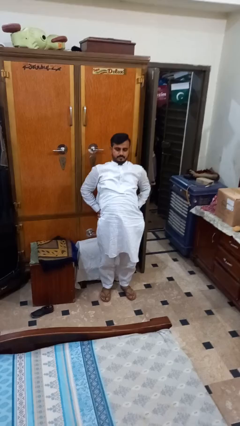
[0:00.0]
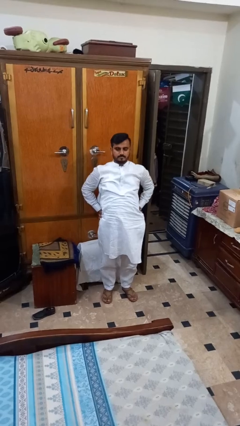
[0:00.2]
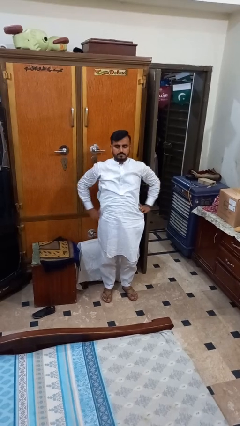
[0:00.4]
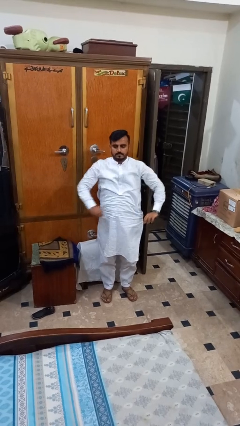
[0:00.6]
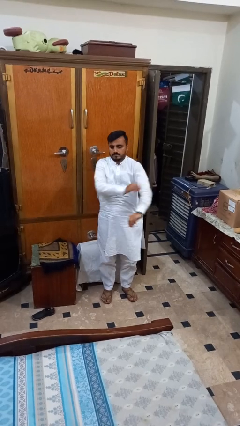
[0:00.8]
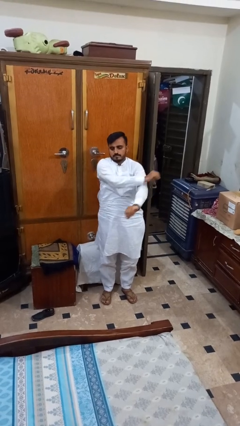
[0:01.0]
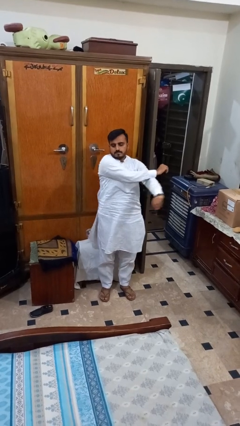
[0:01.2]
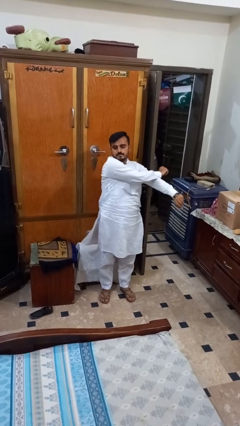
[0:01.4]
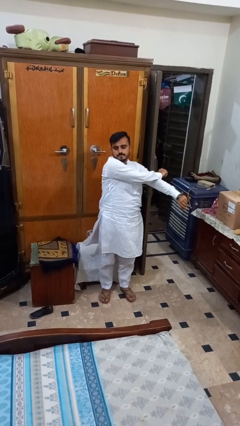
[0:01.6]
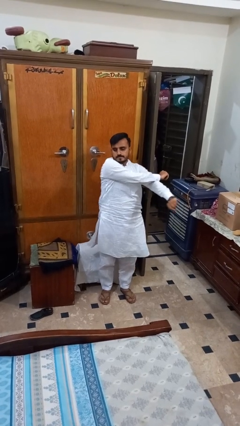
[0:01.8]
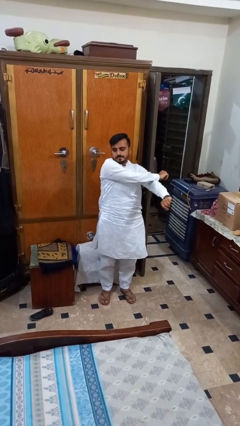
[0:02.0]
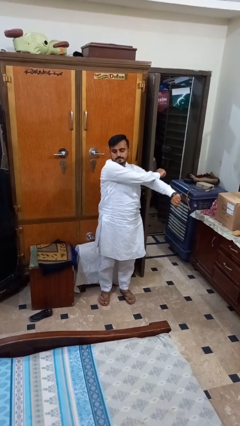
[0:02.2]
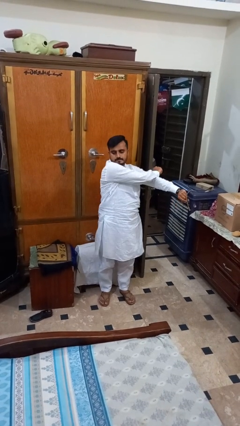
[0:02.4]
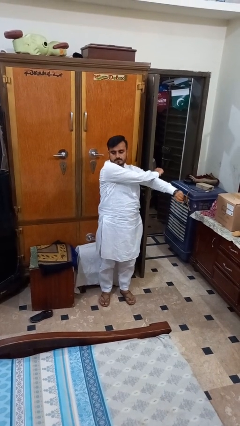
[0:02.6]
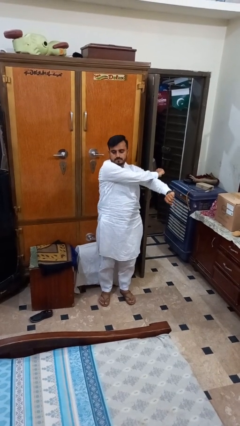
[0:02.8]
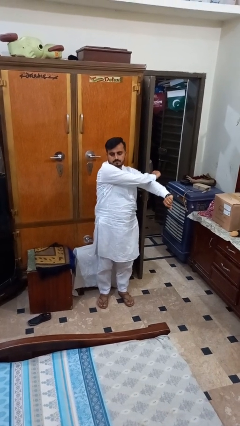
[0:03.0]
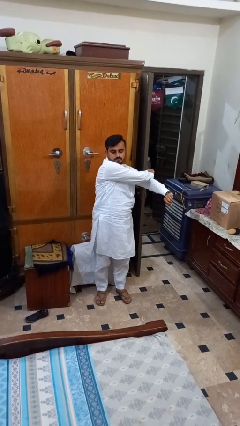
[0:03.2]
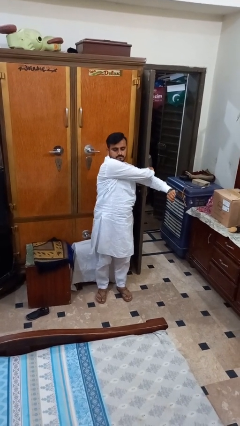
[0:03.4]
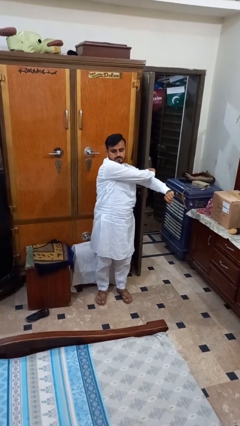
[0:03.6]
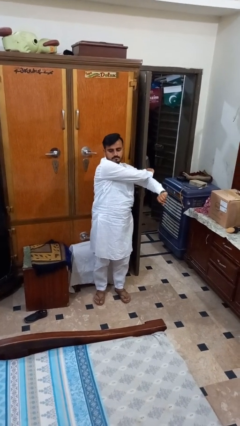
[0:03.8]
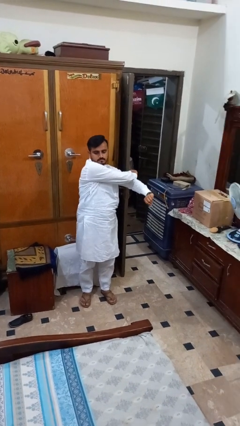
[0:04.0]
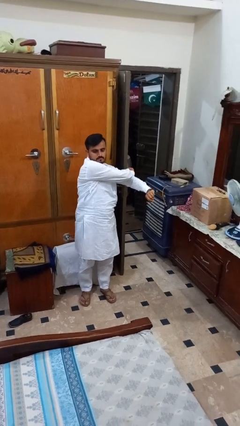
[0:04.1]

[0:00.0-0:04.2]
person stretches arms to side

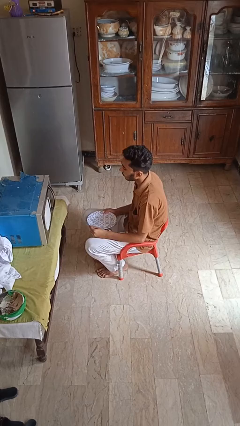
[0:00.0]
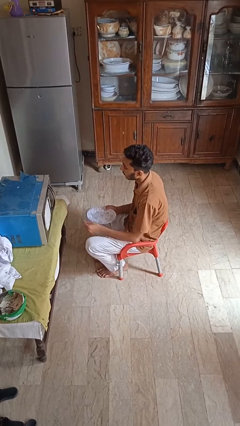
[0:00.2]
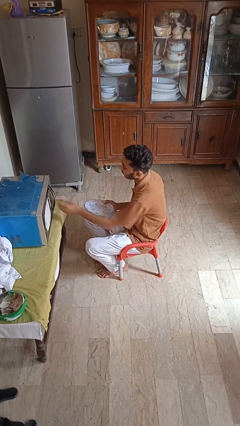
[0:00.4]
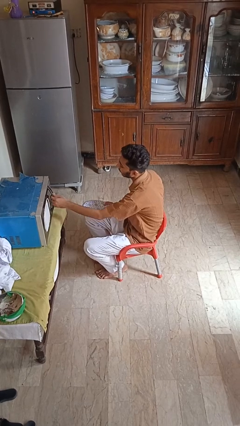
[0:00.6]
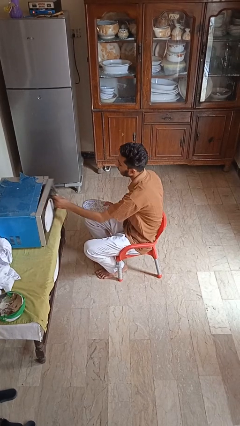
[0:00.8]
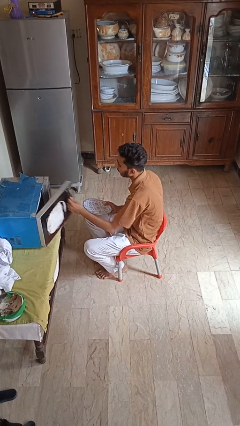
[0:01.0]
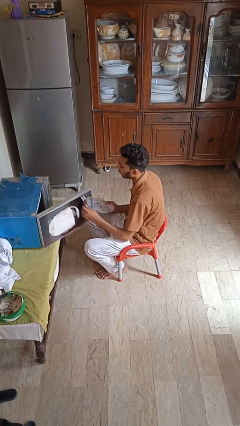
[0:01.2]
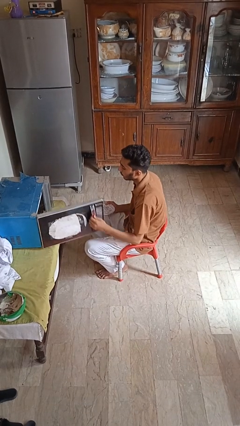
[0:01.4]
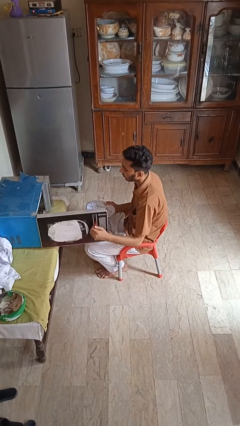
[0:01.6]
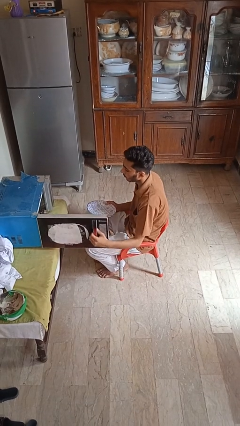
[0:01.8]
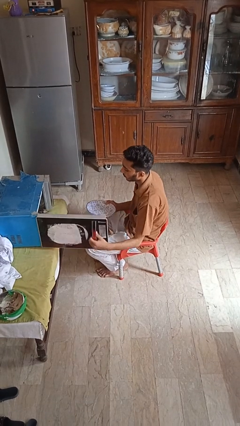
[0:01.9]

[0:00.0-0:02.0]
person opens microwave

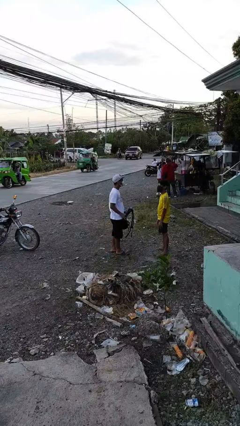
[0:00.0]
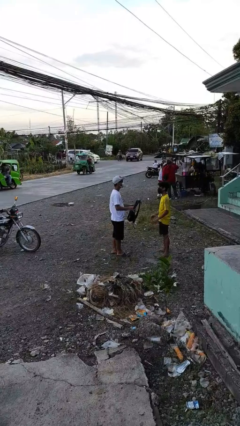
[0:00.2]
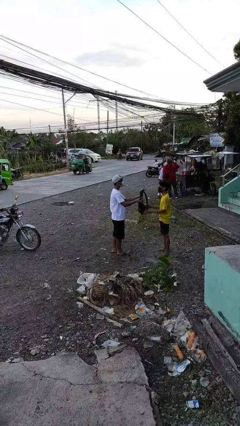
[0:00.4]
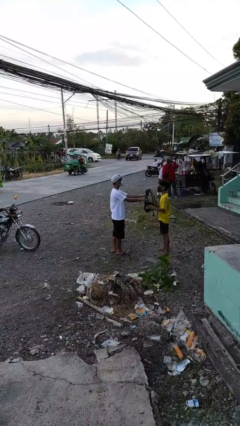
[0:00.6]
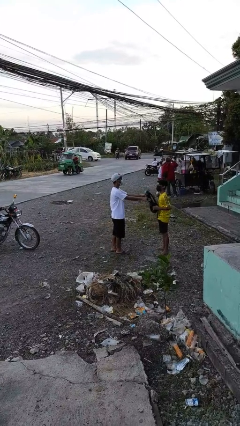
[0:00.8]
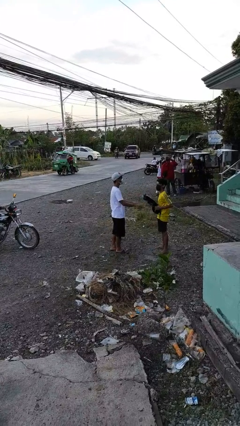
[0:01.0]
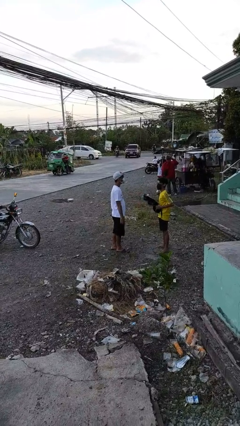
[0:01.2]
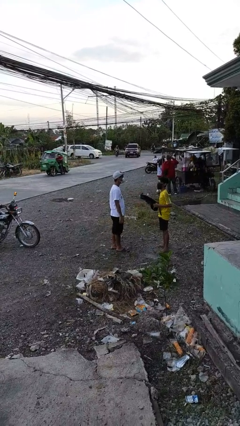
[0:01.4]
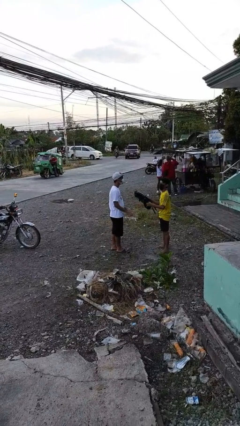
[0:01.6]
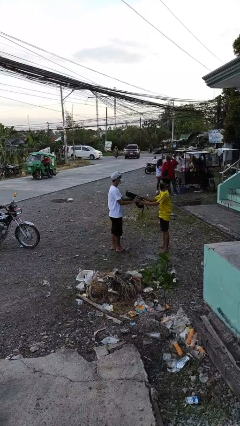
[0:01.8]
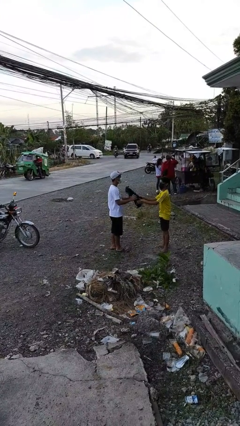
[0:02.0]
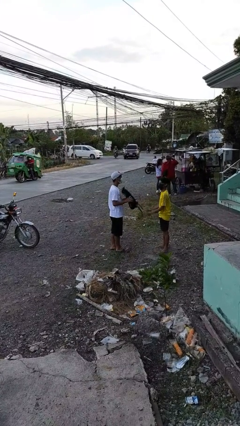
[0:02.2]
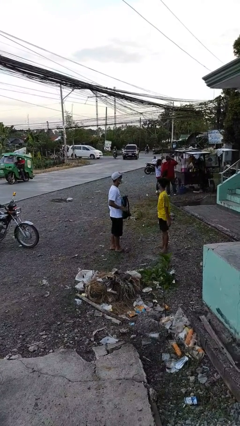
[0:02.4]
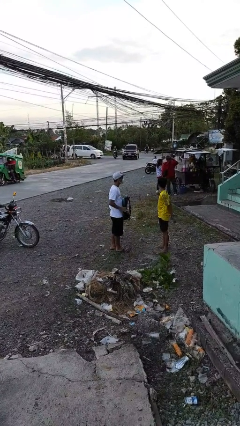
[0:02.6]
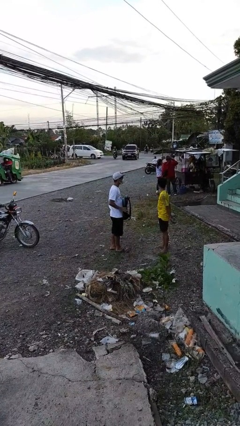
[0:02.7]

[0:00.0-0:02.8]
person transfers object to person

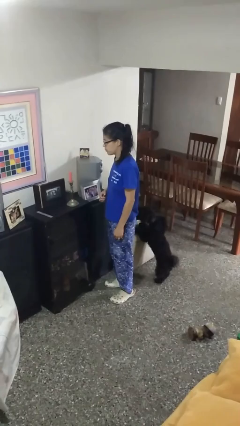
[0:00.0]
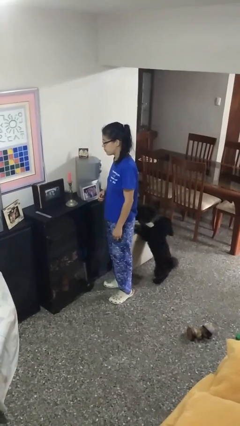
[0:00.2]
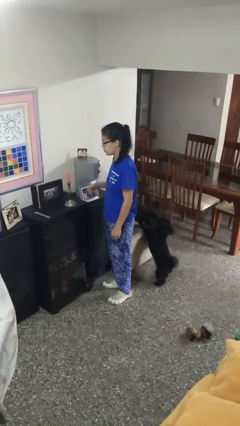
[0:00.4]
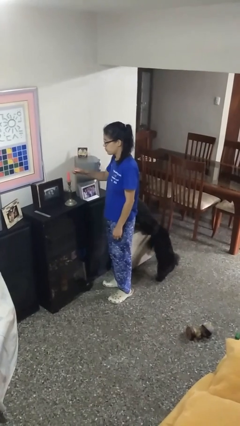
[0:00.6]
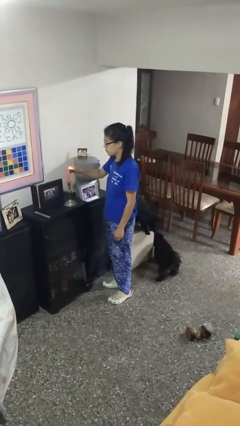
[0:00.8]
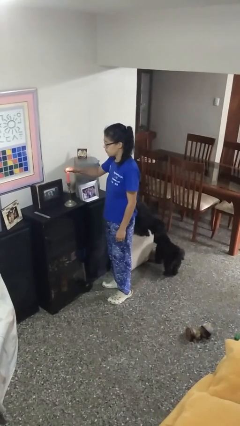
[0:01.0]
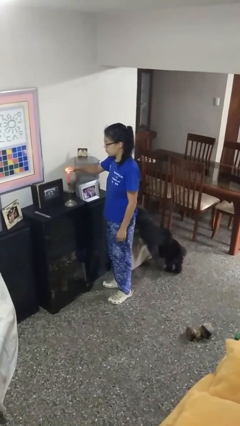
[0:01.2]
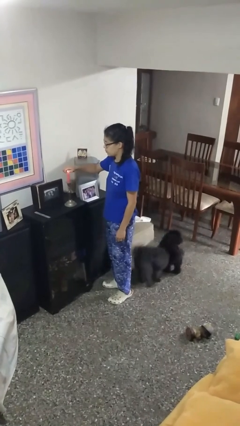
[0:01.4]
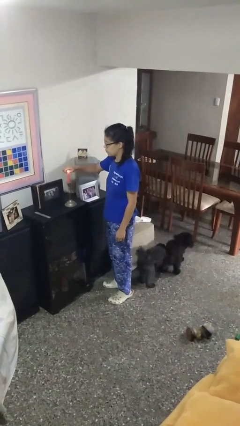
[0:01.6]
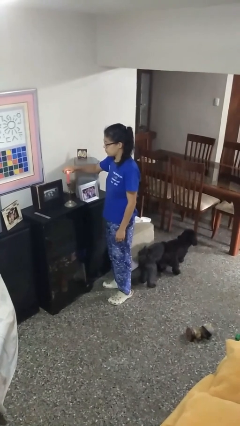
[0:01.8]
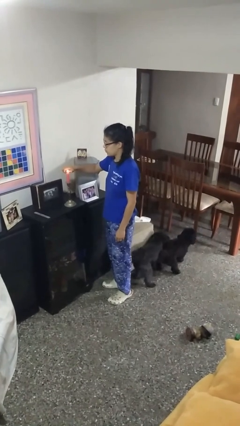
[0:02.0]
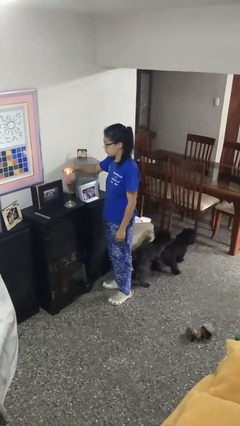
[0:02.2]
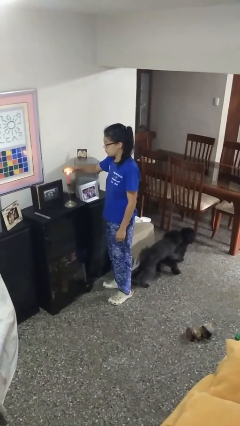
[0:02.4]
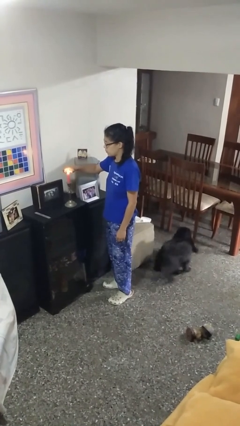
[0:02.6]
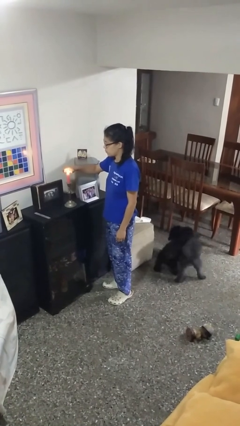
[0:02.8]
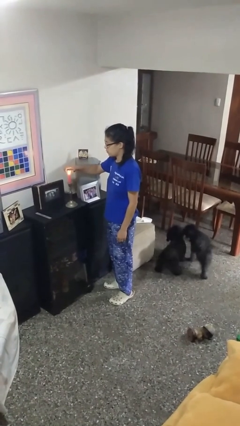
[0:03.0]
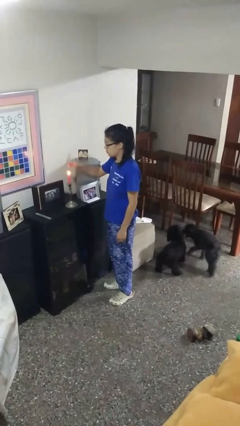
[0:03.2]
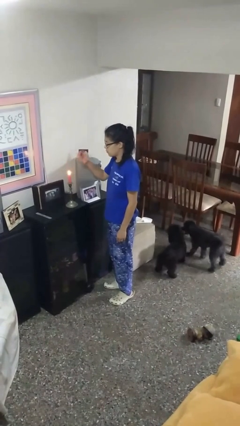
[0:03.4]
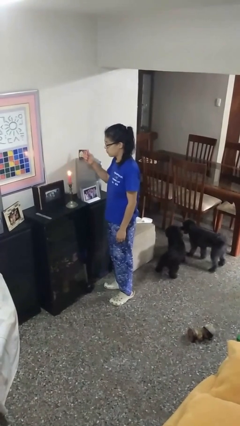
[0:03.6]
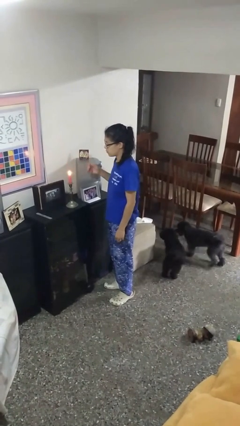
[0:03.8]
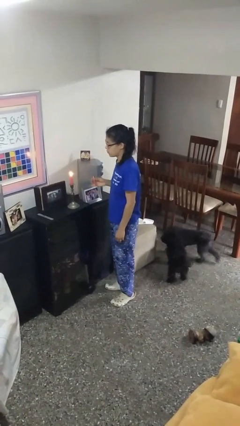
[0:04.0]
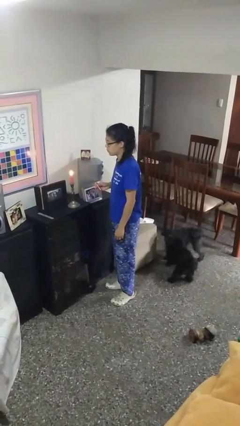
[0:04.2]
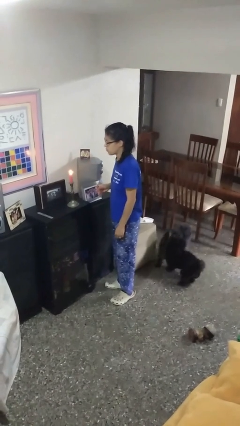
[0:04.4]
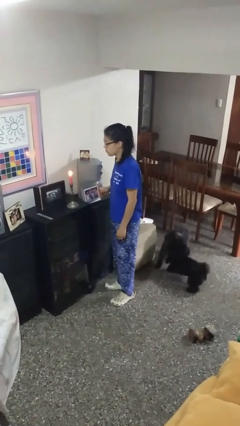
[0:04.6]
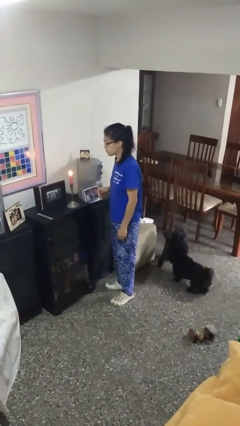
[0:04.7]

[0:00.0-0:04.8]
person lights candle

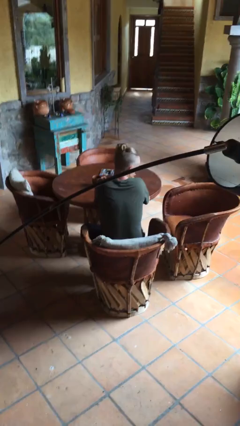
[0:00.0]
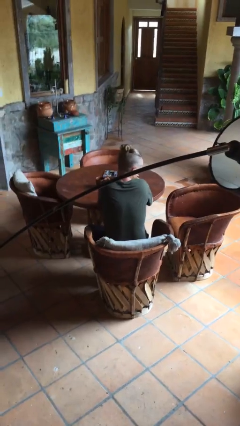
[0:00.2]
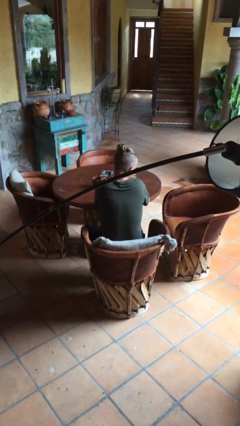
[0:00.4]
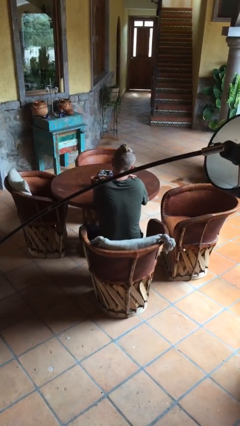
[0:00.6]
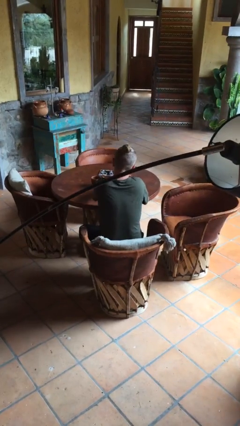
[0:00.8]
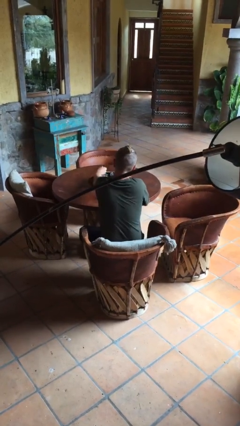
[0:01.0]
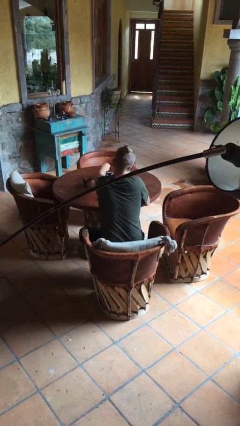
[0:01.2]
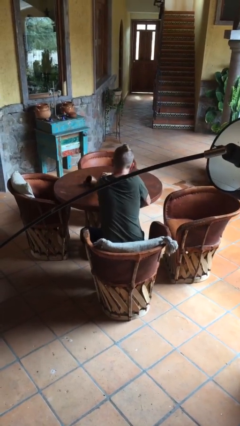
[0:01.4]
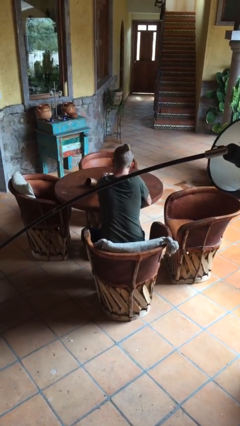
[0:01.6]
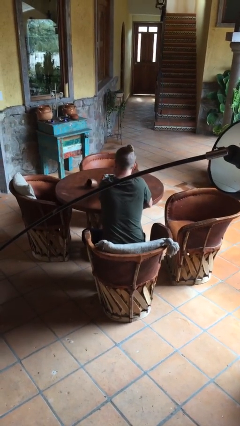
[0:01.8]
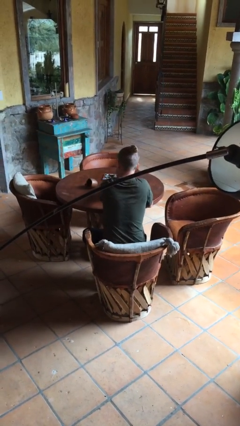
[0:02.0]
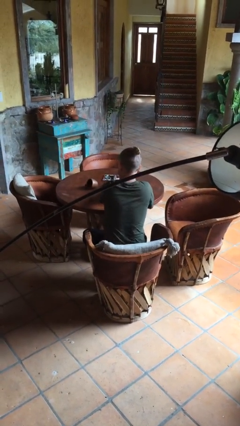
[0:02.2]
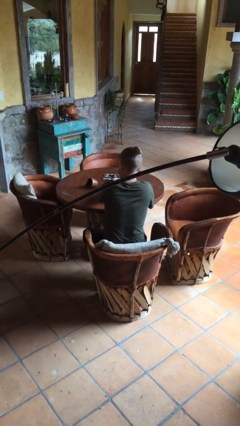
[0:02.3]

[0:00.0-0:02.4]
person knocks over glass

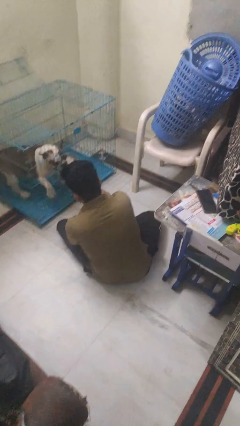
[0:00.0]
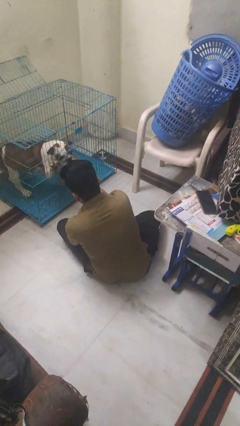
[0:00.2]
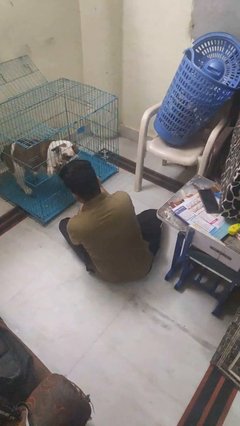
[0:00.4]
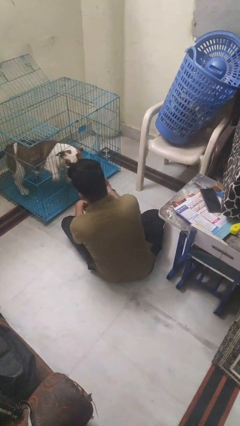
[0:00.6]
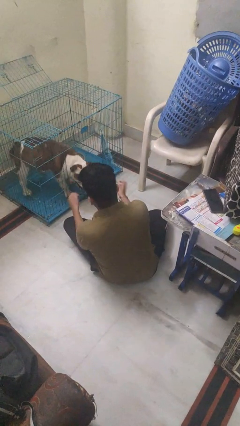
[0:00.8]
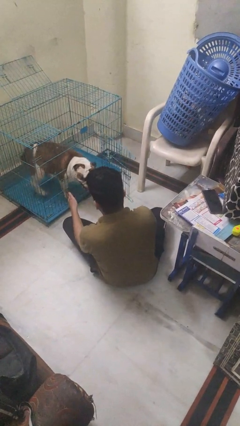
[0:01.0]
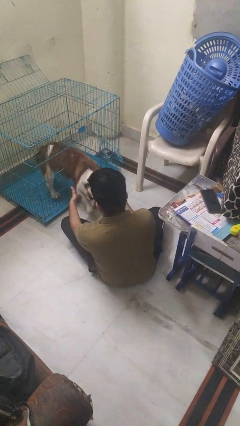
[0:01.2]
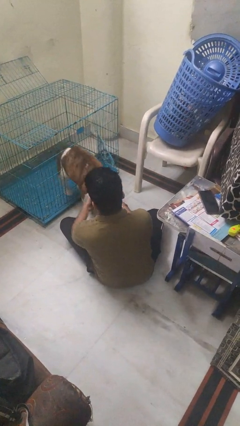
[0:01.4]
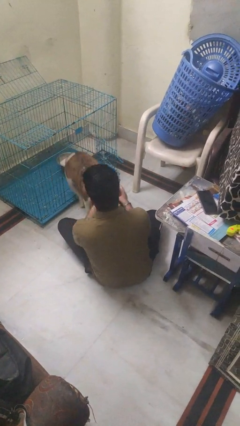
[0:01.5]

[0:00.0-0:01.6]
person uncrates dog
